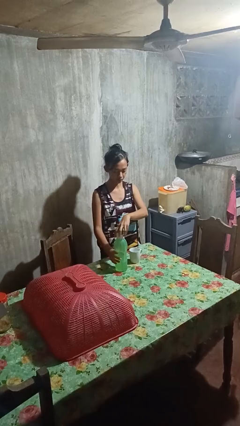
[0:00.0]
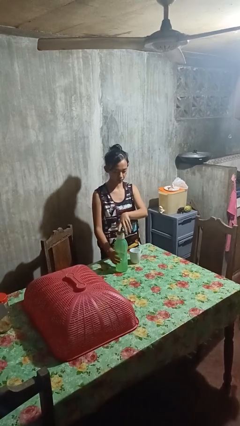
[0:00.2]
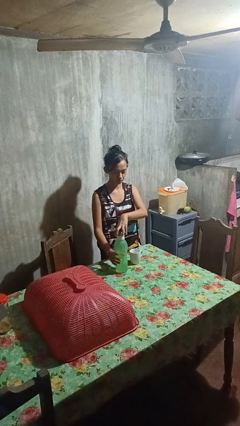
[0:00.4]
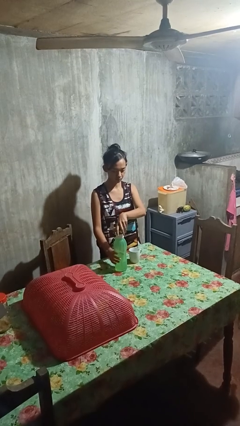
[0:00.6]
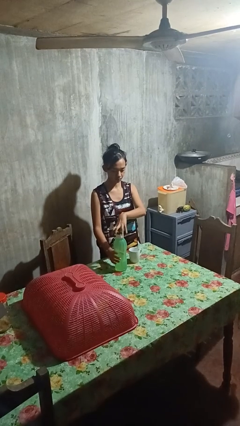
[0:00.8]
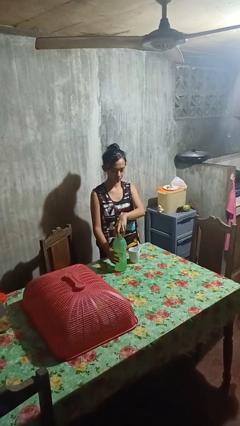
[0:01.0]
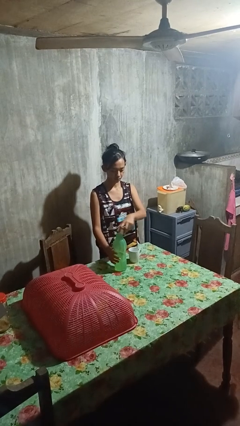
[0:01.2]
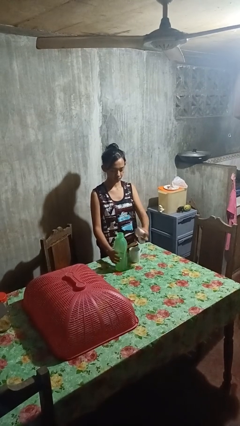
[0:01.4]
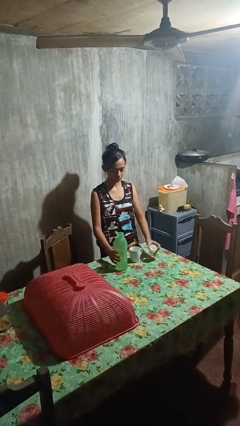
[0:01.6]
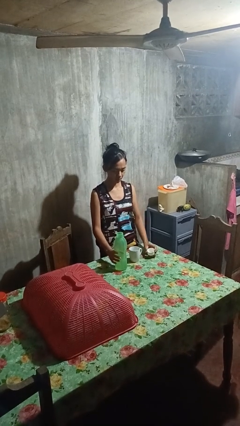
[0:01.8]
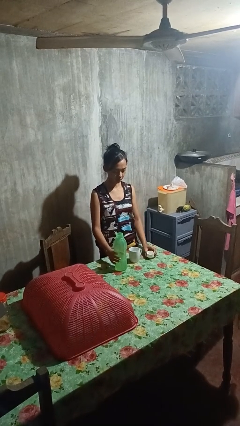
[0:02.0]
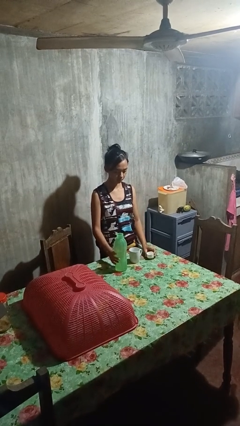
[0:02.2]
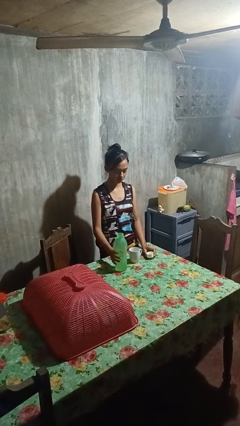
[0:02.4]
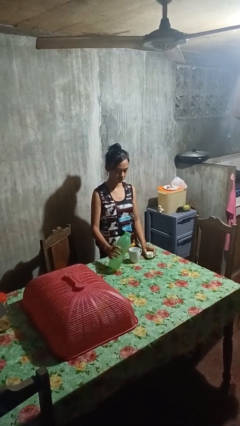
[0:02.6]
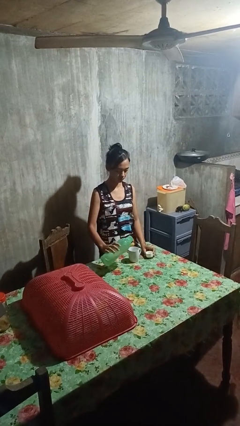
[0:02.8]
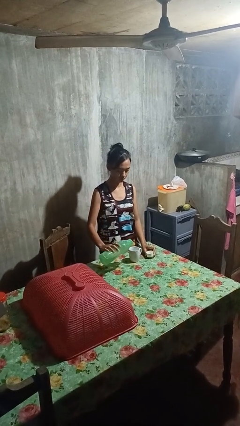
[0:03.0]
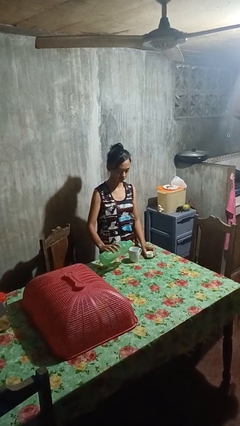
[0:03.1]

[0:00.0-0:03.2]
person unscrews lid from bottle

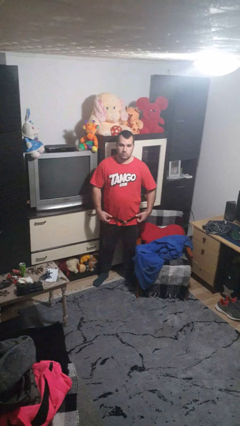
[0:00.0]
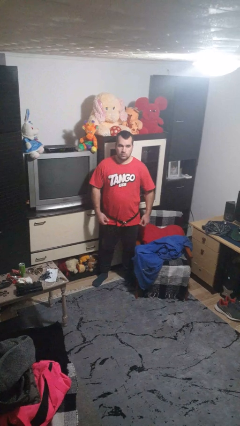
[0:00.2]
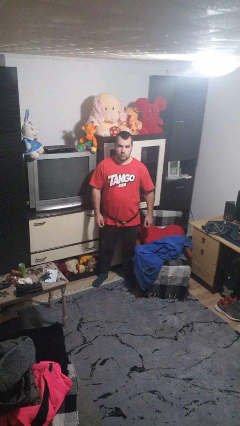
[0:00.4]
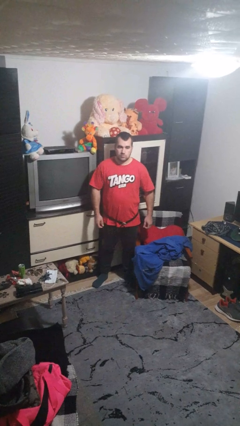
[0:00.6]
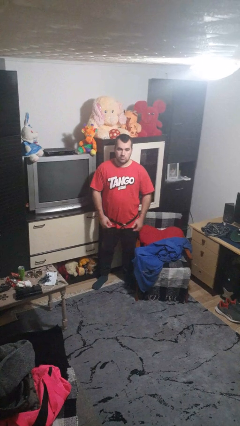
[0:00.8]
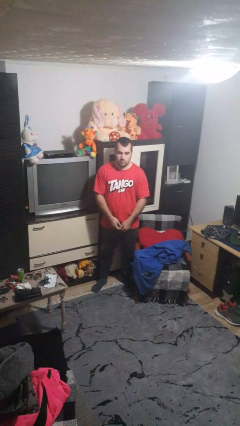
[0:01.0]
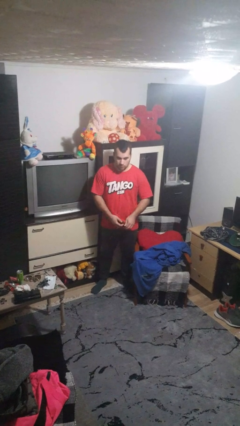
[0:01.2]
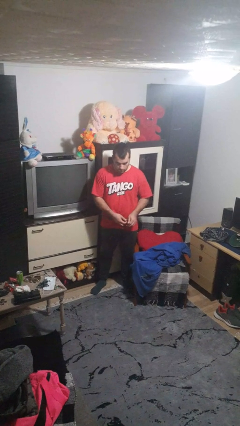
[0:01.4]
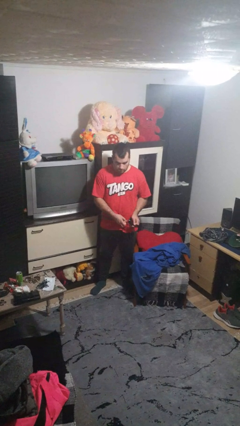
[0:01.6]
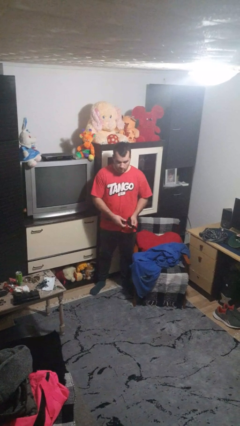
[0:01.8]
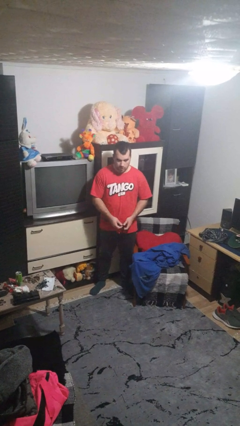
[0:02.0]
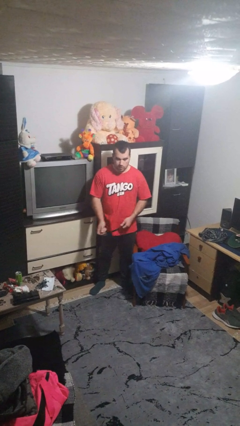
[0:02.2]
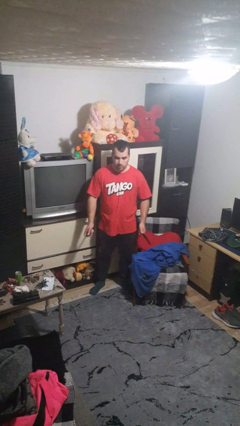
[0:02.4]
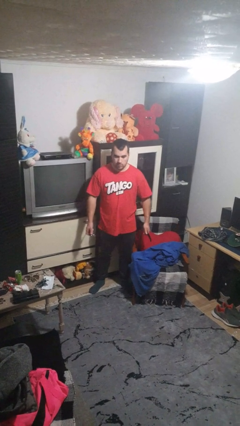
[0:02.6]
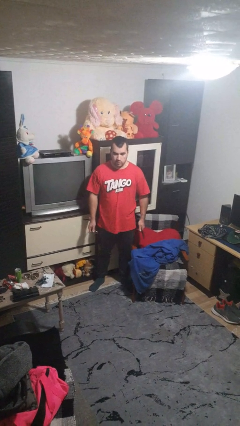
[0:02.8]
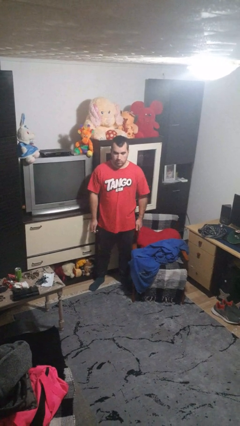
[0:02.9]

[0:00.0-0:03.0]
person takes off belt

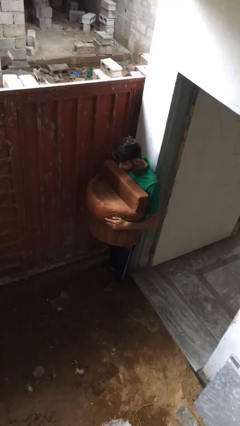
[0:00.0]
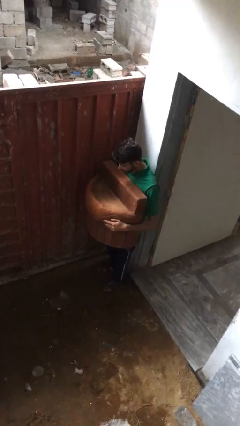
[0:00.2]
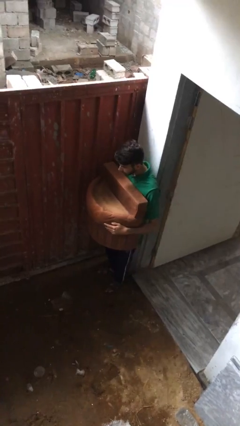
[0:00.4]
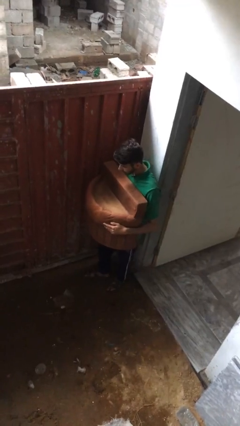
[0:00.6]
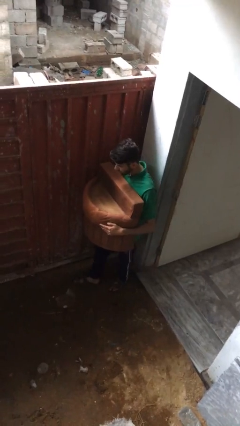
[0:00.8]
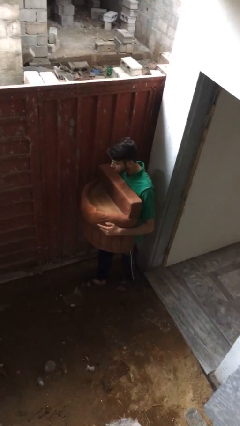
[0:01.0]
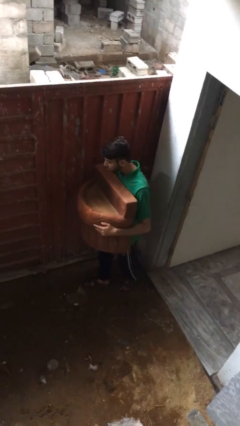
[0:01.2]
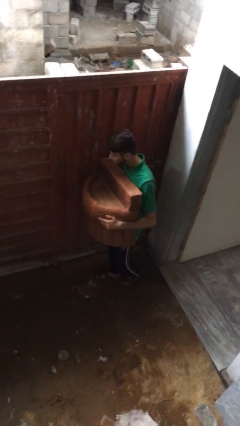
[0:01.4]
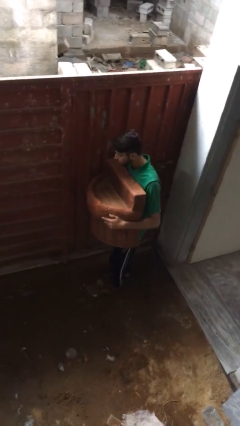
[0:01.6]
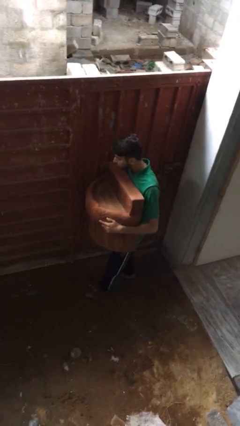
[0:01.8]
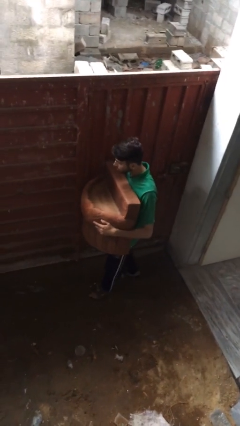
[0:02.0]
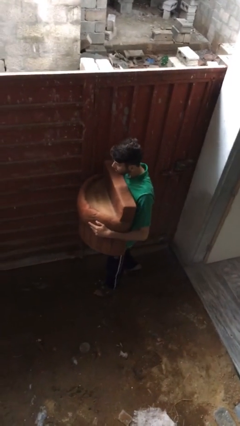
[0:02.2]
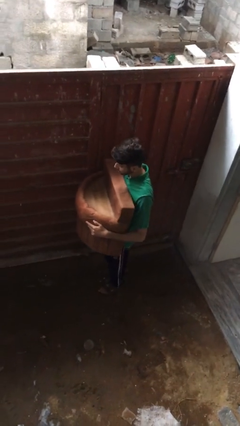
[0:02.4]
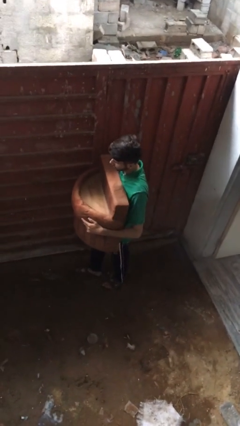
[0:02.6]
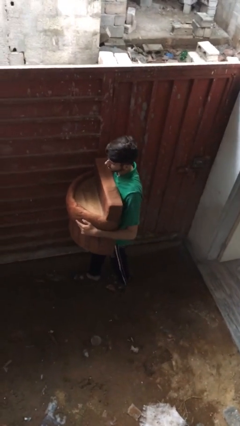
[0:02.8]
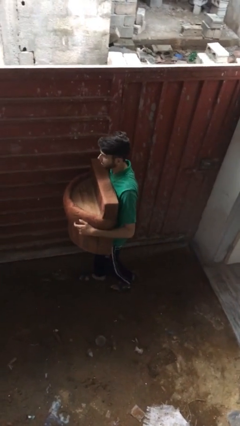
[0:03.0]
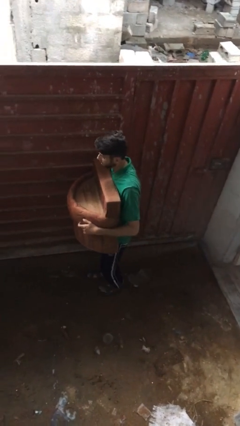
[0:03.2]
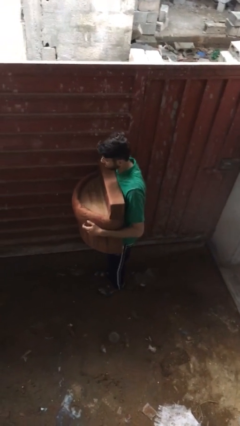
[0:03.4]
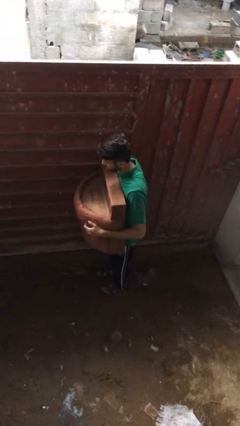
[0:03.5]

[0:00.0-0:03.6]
person carries heavy object

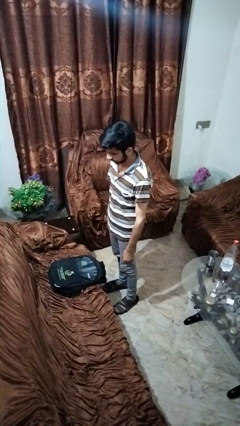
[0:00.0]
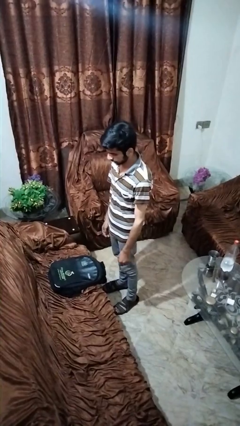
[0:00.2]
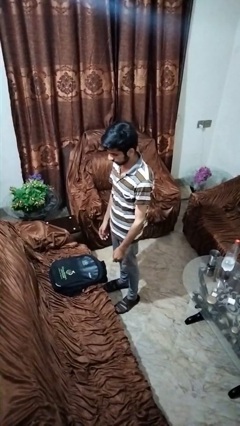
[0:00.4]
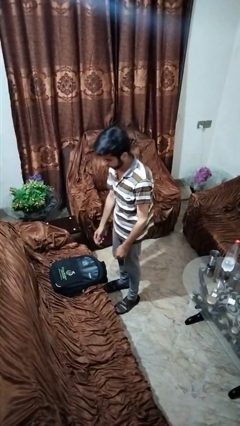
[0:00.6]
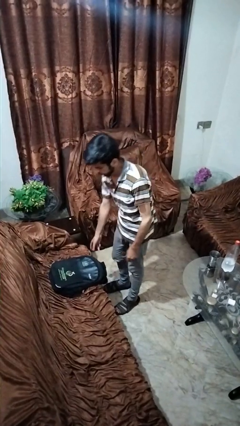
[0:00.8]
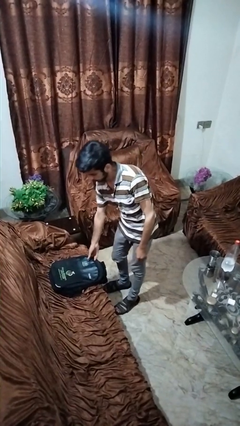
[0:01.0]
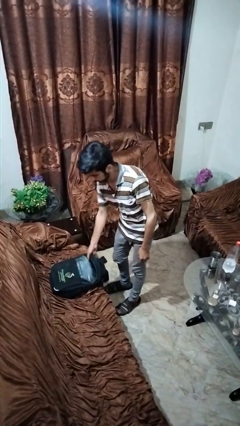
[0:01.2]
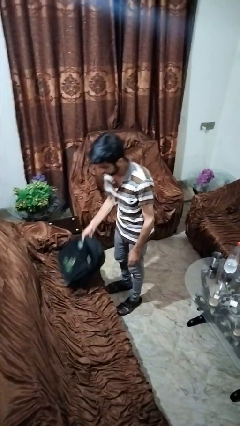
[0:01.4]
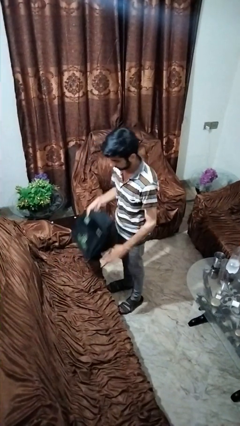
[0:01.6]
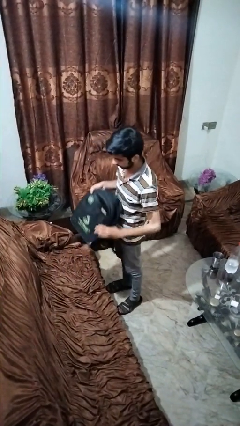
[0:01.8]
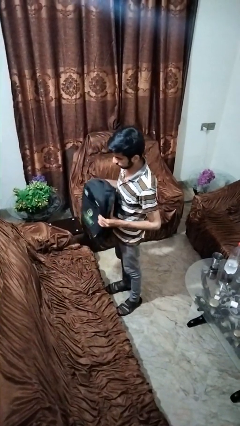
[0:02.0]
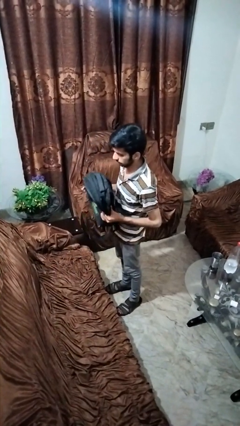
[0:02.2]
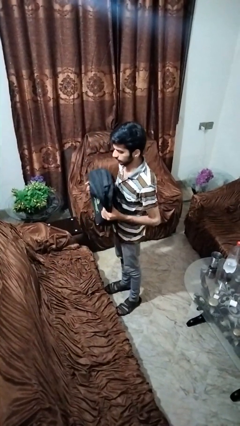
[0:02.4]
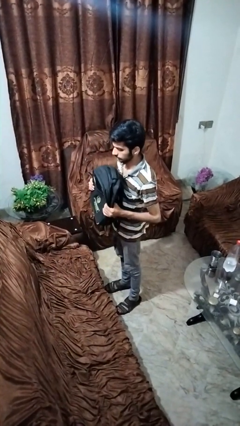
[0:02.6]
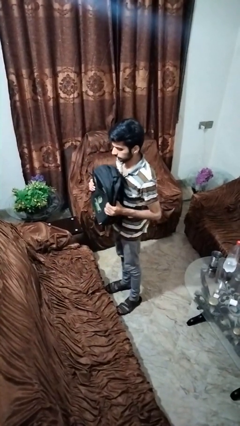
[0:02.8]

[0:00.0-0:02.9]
person picks up object from couch

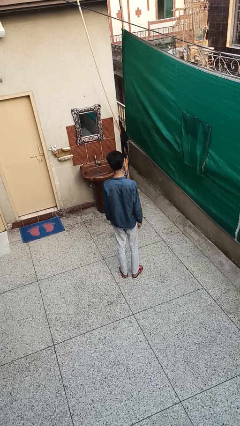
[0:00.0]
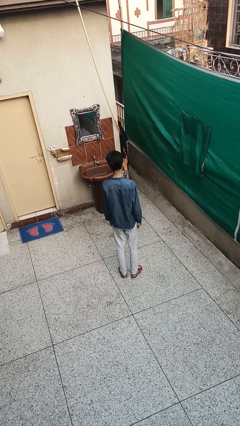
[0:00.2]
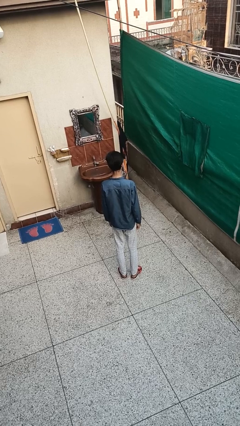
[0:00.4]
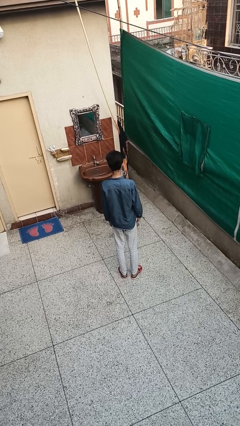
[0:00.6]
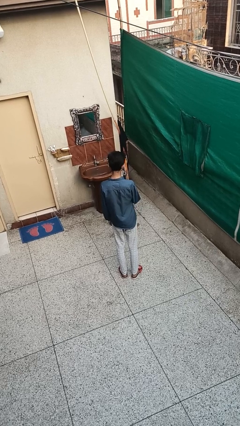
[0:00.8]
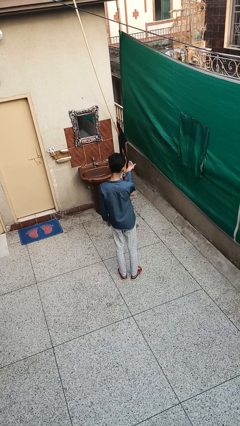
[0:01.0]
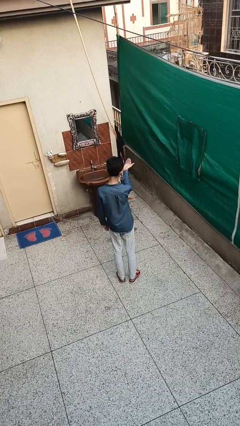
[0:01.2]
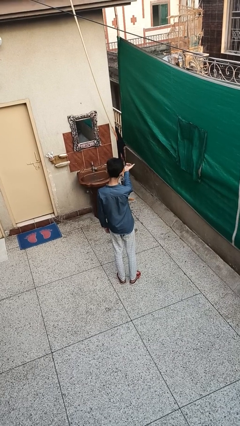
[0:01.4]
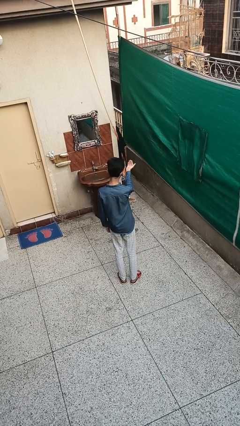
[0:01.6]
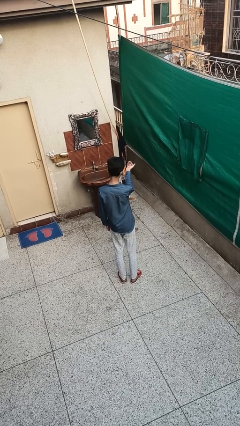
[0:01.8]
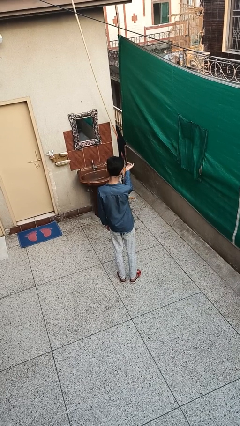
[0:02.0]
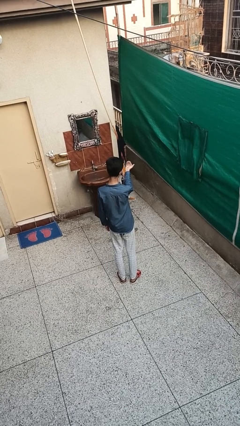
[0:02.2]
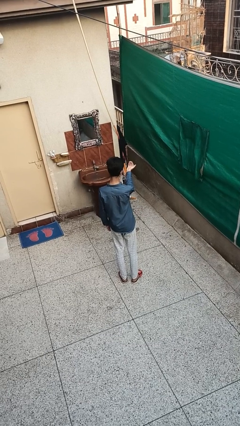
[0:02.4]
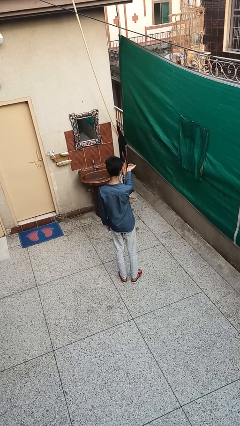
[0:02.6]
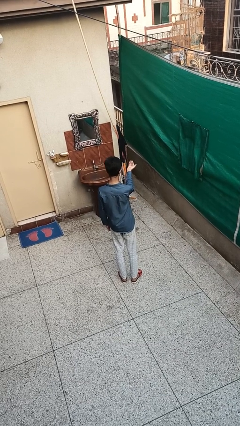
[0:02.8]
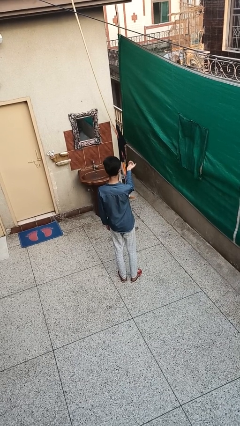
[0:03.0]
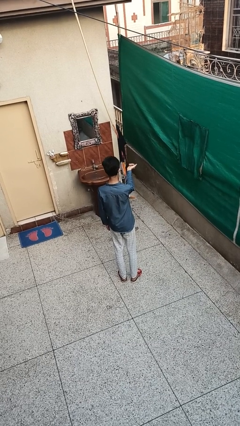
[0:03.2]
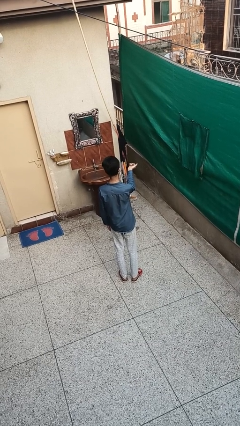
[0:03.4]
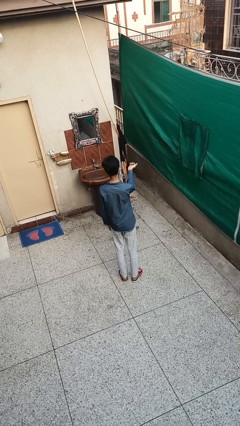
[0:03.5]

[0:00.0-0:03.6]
person gestures come here

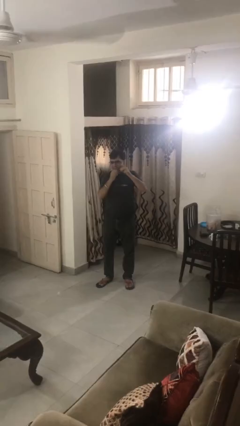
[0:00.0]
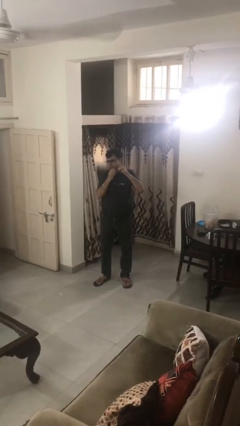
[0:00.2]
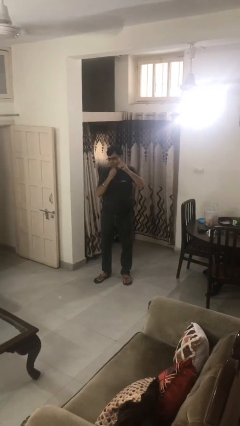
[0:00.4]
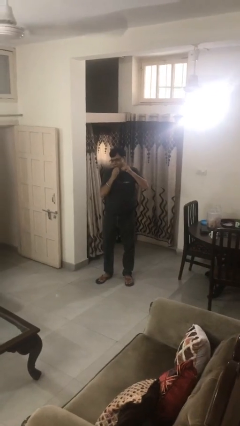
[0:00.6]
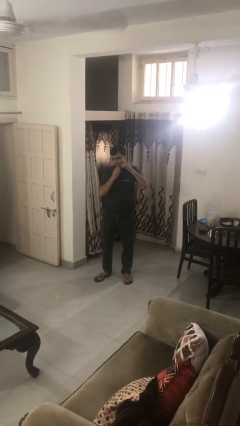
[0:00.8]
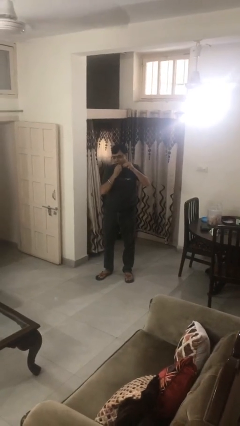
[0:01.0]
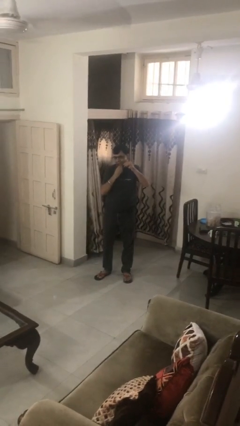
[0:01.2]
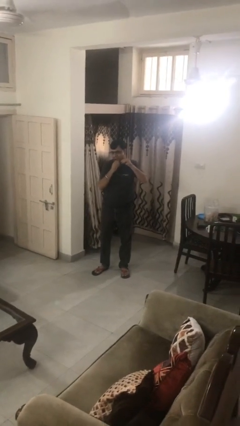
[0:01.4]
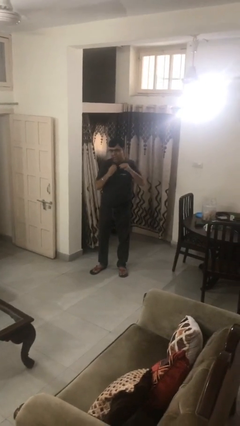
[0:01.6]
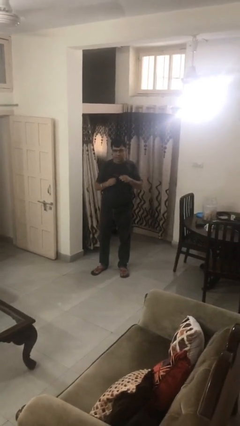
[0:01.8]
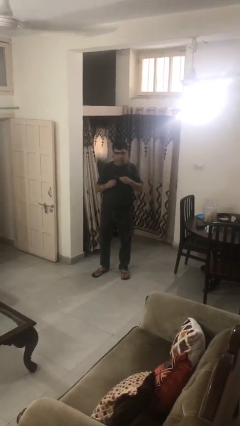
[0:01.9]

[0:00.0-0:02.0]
person flosses
